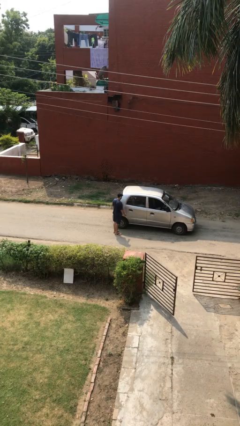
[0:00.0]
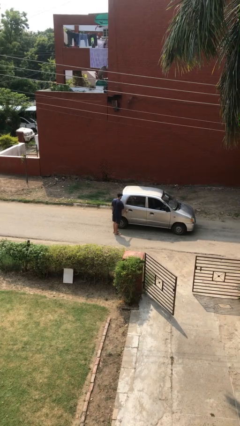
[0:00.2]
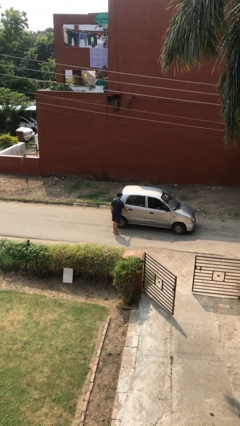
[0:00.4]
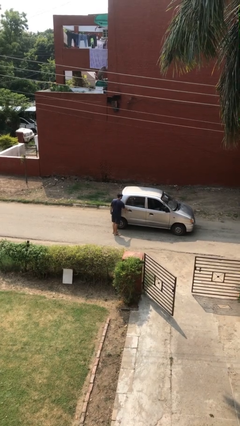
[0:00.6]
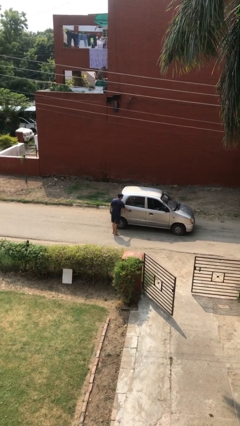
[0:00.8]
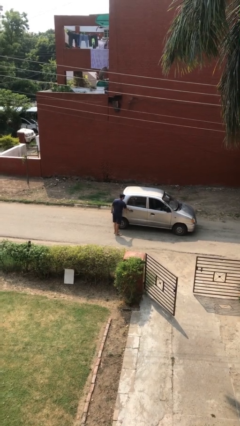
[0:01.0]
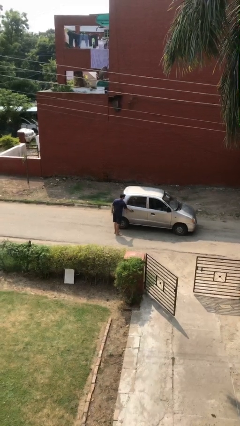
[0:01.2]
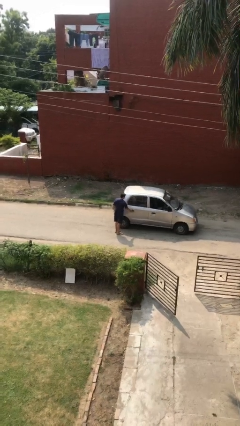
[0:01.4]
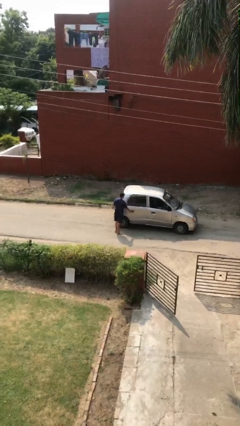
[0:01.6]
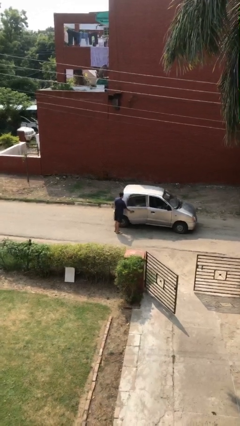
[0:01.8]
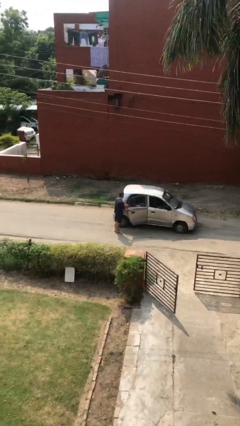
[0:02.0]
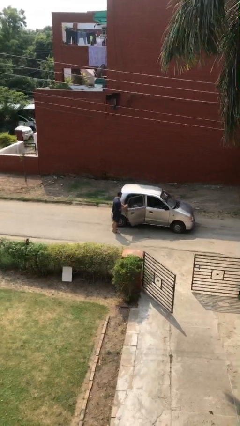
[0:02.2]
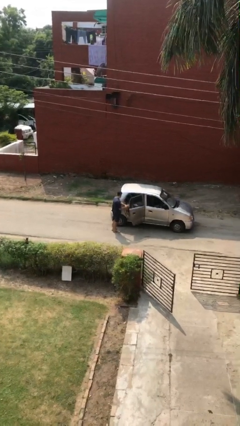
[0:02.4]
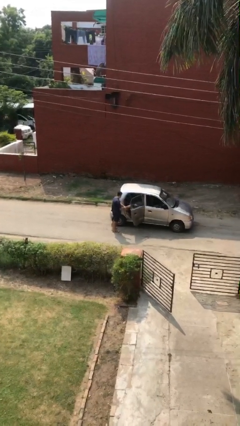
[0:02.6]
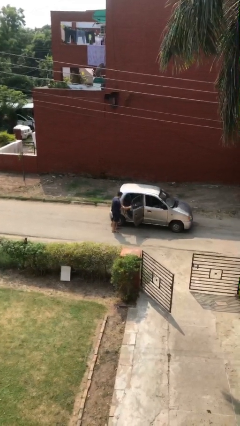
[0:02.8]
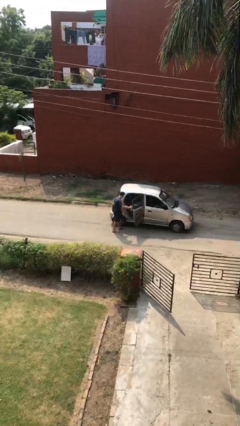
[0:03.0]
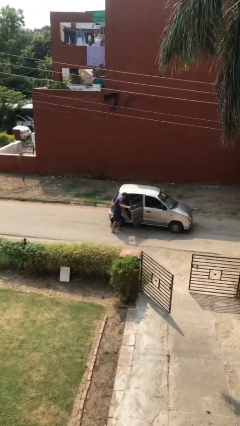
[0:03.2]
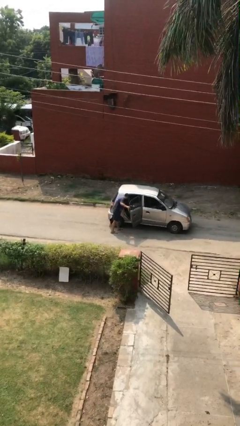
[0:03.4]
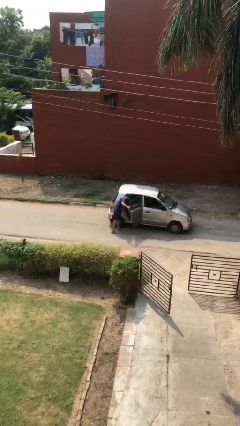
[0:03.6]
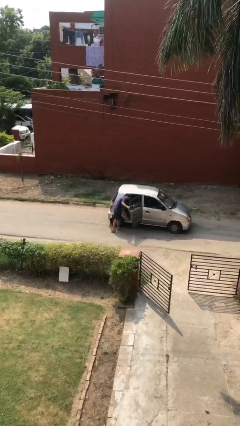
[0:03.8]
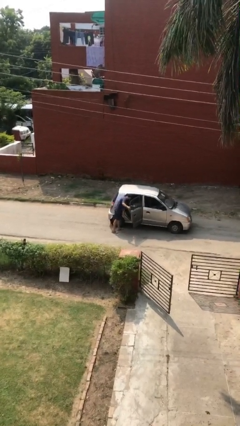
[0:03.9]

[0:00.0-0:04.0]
person opens car door

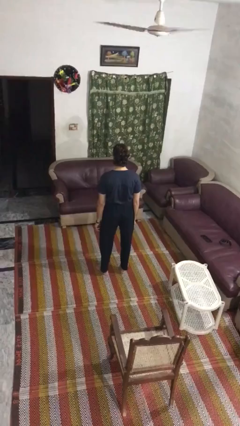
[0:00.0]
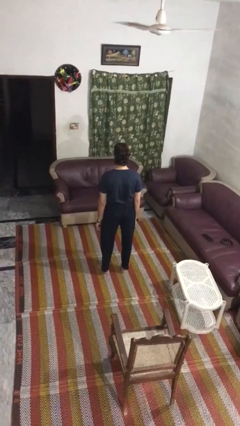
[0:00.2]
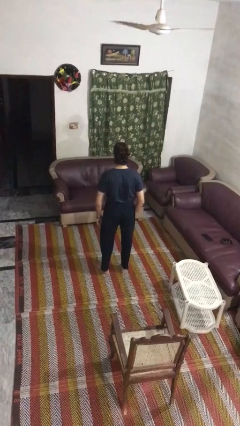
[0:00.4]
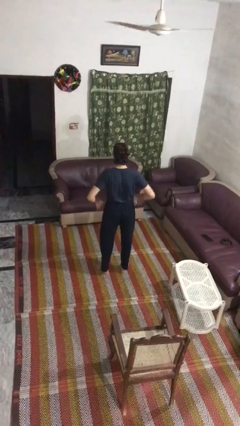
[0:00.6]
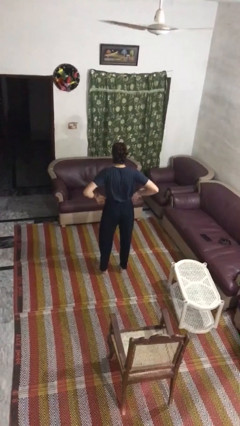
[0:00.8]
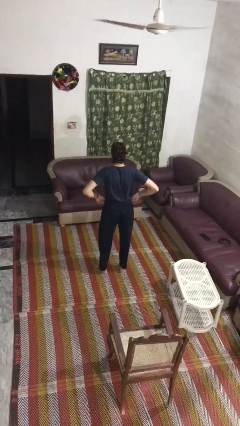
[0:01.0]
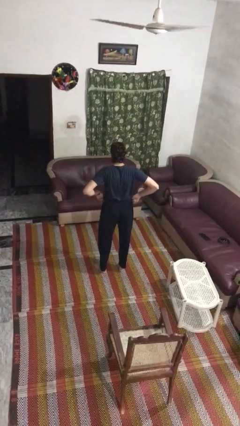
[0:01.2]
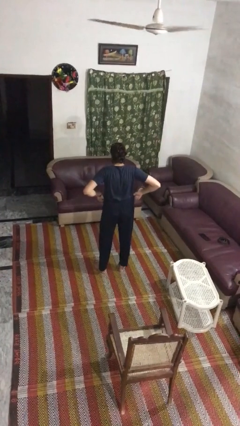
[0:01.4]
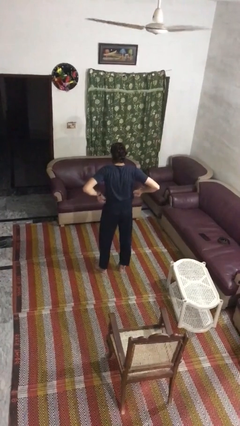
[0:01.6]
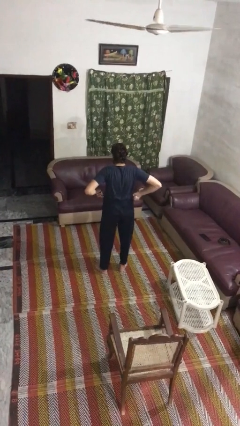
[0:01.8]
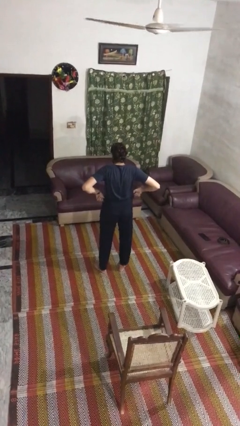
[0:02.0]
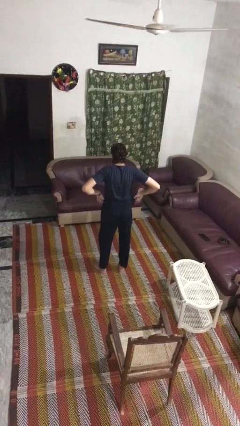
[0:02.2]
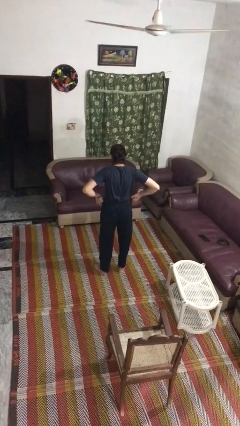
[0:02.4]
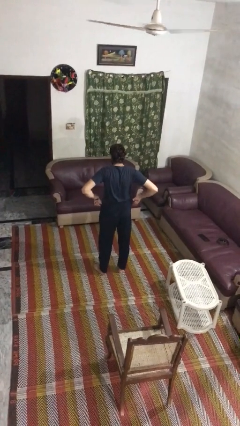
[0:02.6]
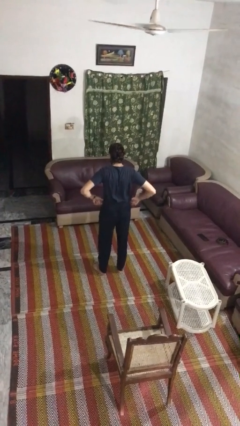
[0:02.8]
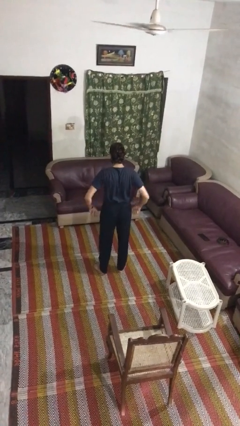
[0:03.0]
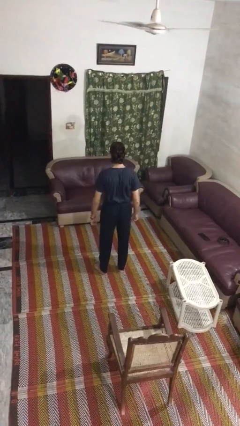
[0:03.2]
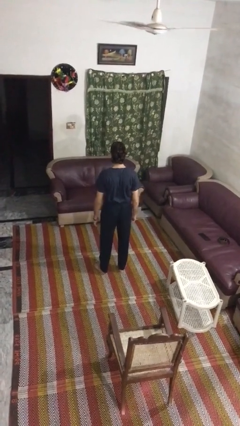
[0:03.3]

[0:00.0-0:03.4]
person hikes up pants

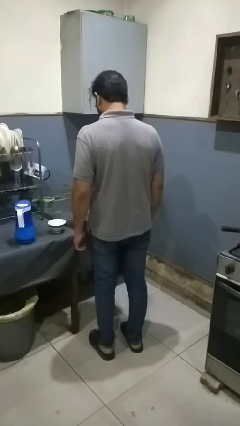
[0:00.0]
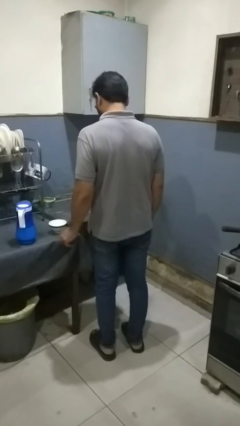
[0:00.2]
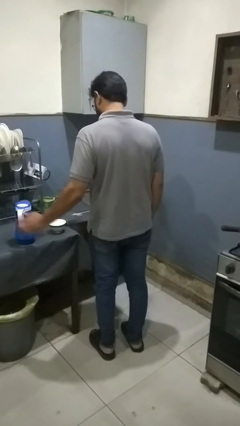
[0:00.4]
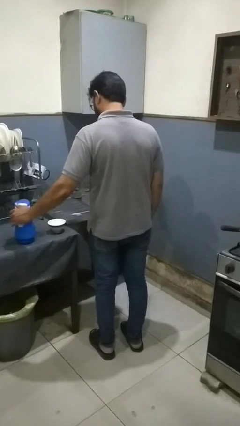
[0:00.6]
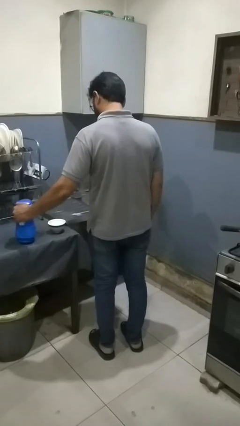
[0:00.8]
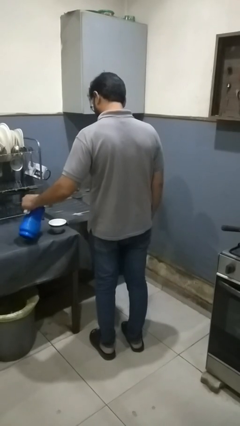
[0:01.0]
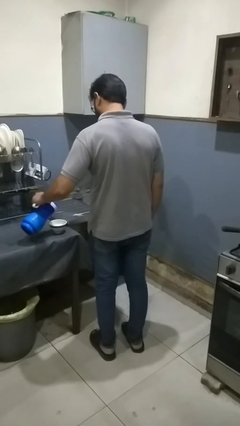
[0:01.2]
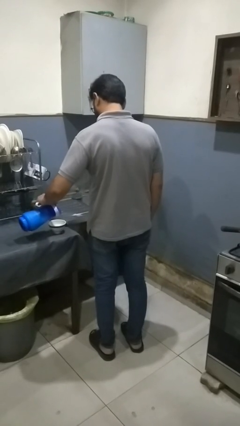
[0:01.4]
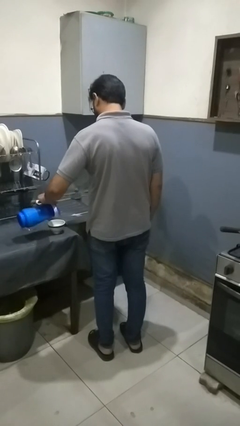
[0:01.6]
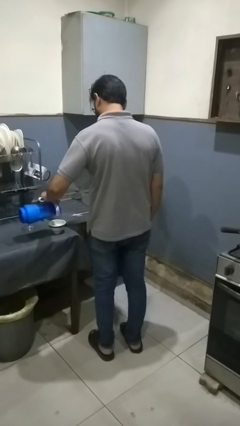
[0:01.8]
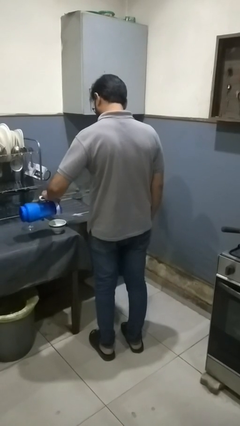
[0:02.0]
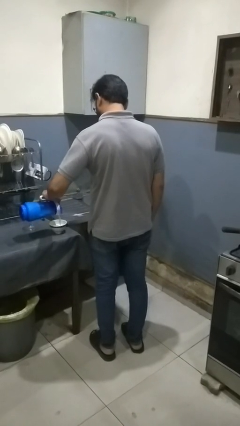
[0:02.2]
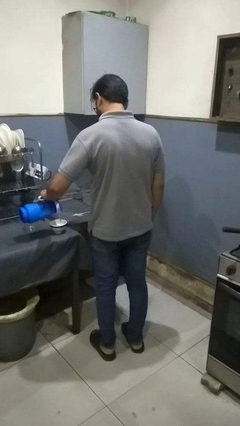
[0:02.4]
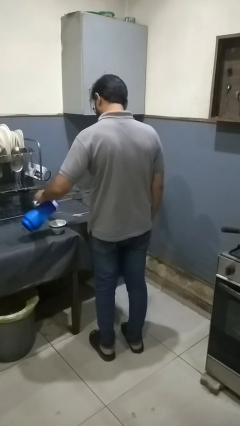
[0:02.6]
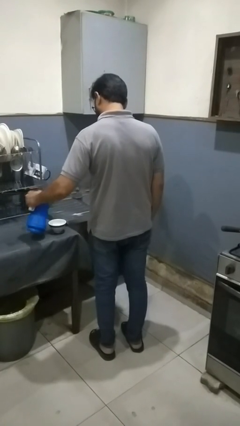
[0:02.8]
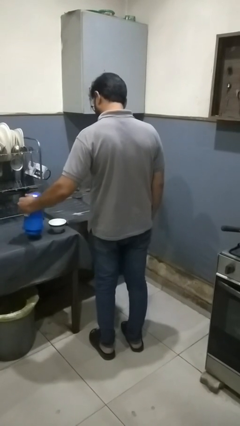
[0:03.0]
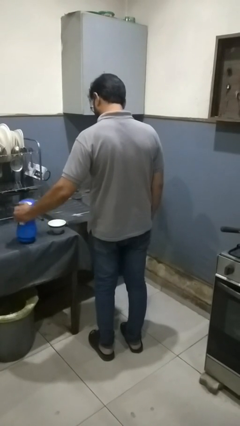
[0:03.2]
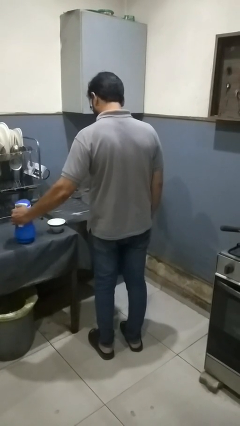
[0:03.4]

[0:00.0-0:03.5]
person pours into bowl

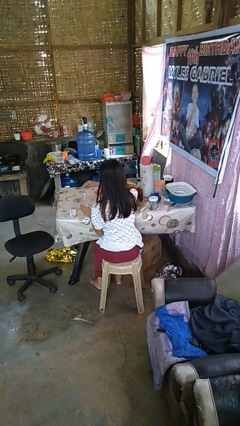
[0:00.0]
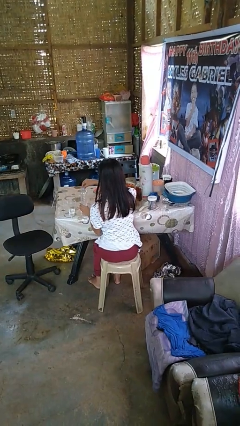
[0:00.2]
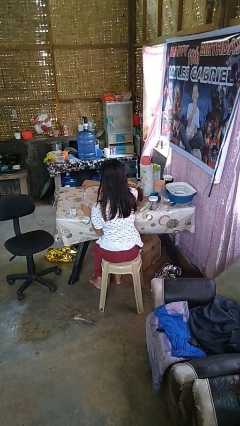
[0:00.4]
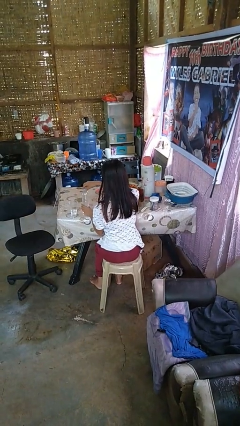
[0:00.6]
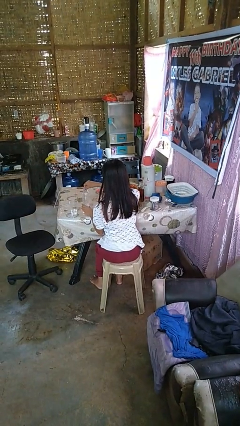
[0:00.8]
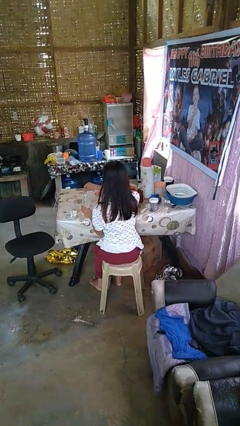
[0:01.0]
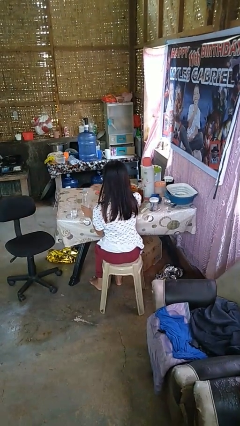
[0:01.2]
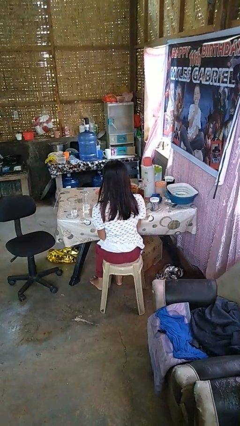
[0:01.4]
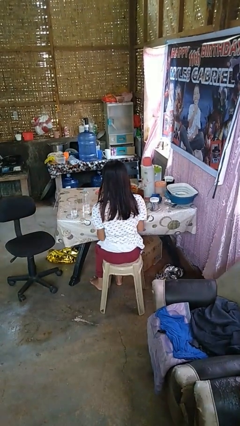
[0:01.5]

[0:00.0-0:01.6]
person screws lid to bottle

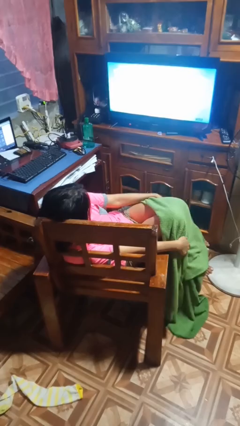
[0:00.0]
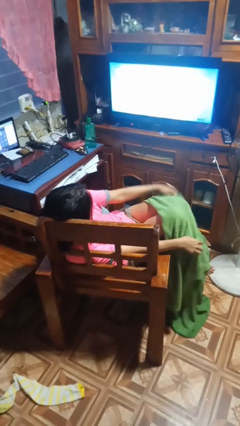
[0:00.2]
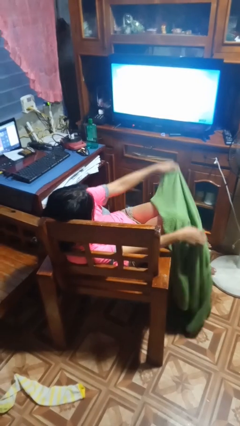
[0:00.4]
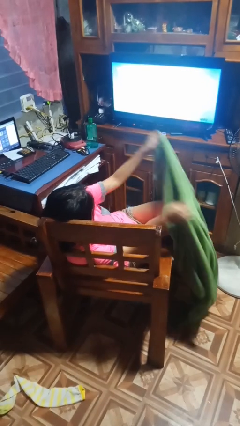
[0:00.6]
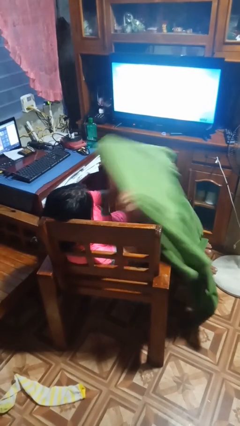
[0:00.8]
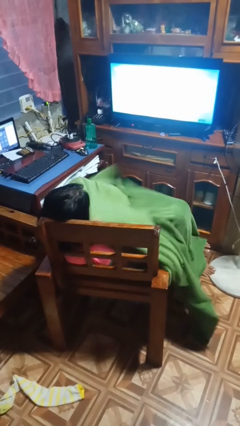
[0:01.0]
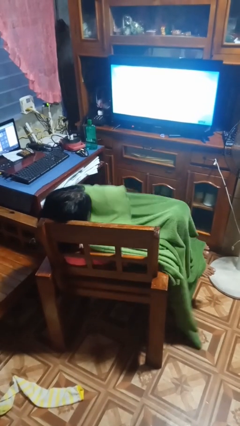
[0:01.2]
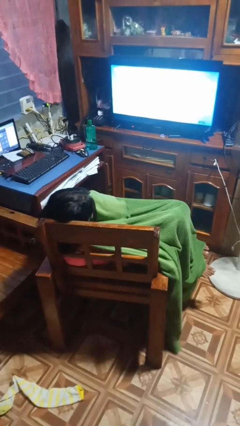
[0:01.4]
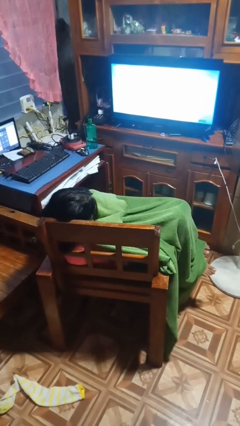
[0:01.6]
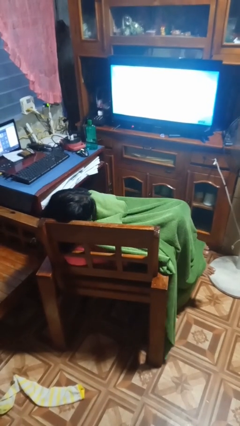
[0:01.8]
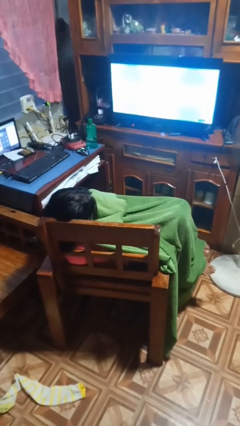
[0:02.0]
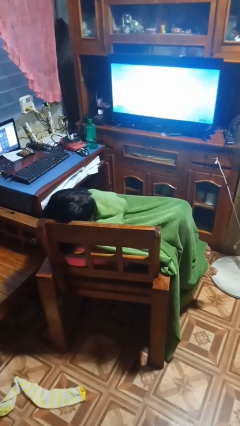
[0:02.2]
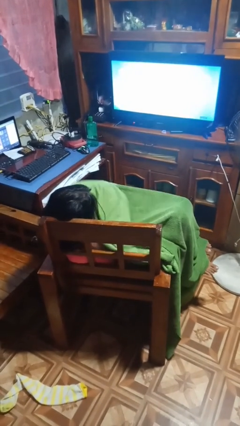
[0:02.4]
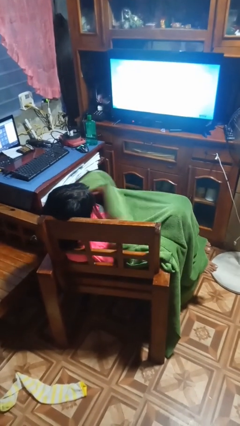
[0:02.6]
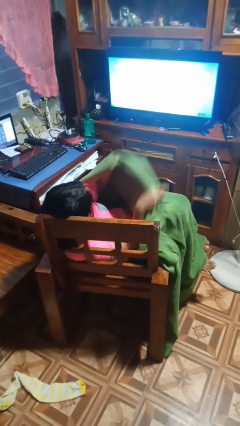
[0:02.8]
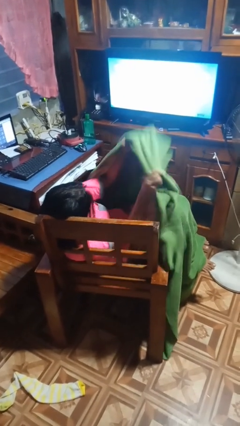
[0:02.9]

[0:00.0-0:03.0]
person covers with blanket

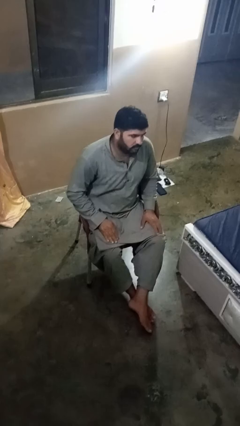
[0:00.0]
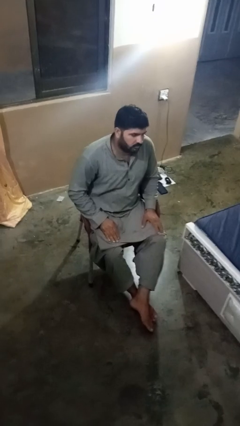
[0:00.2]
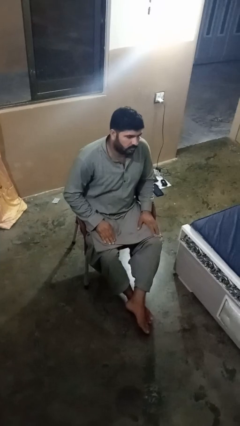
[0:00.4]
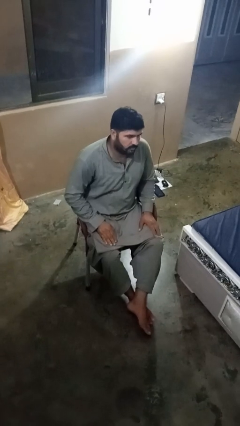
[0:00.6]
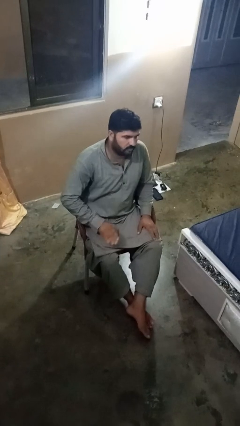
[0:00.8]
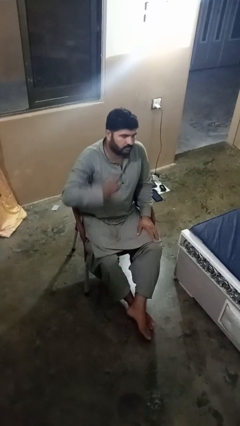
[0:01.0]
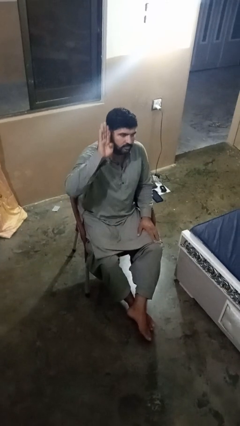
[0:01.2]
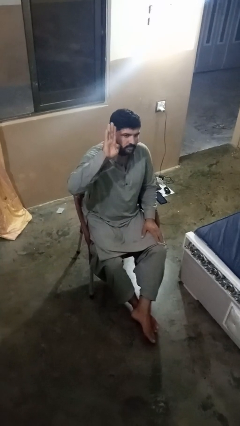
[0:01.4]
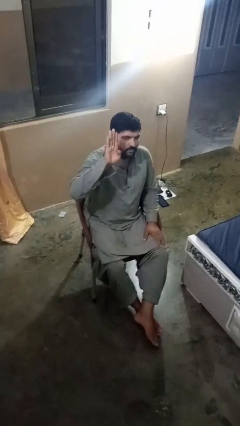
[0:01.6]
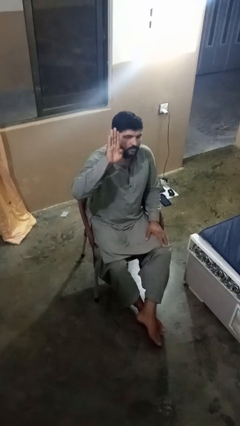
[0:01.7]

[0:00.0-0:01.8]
person gestures number four
